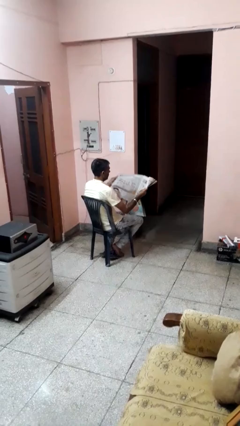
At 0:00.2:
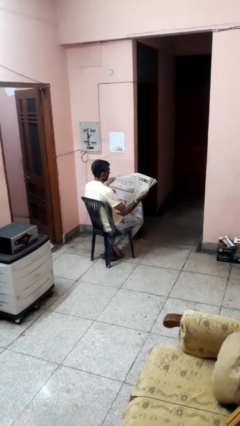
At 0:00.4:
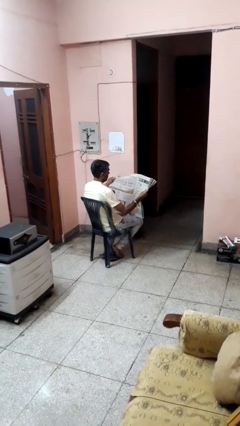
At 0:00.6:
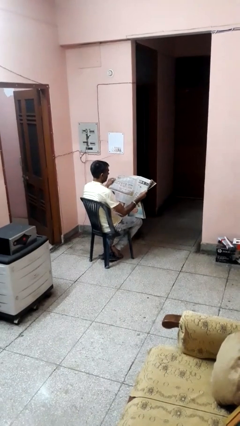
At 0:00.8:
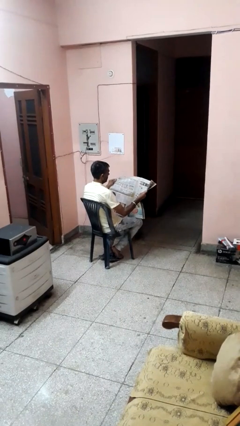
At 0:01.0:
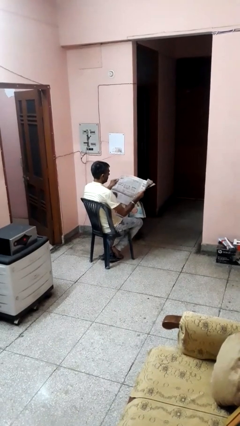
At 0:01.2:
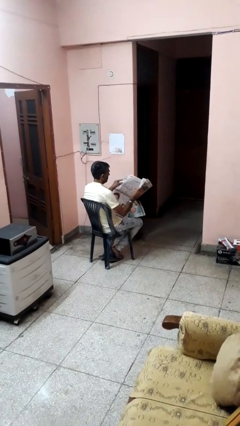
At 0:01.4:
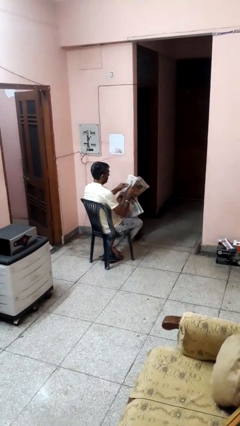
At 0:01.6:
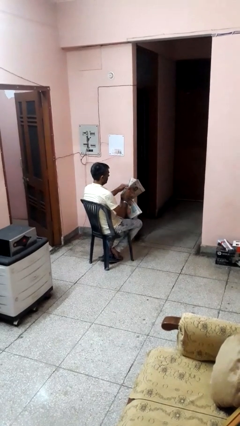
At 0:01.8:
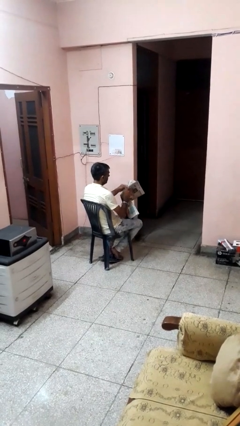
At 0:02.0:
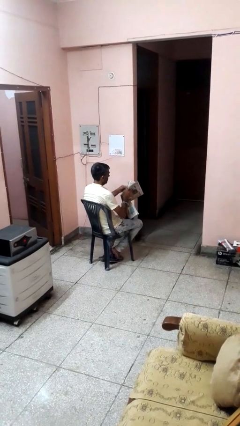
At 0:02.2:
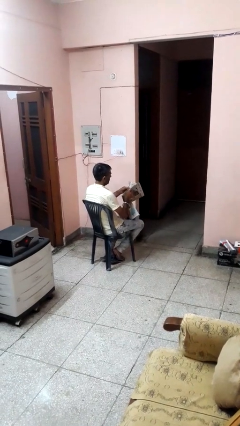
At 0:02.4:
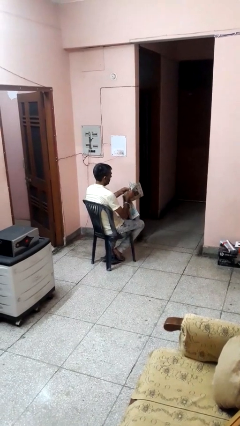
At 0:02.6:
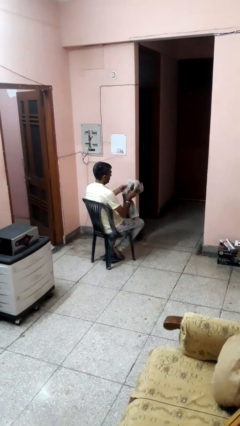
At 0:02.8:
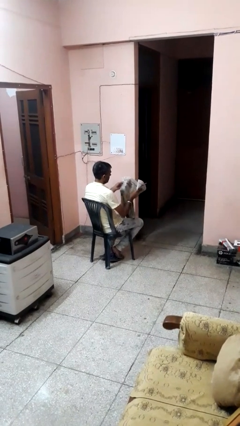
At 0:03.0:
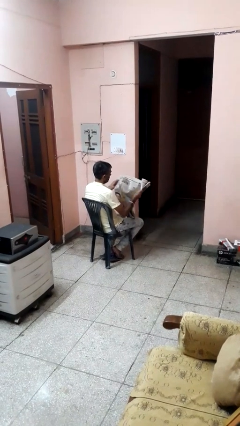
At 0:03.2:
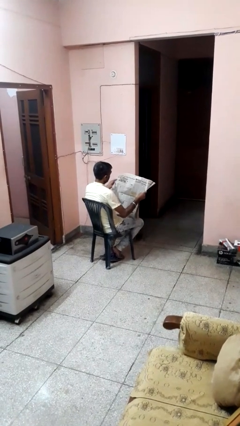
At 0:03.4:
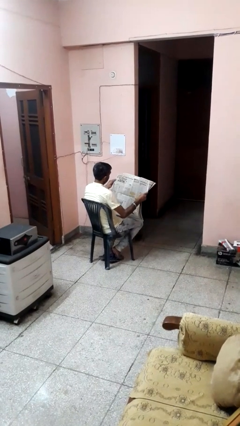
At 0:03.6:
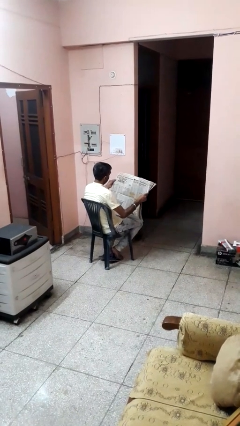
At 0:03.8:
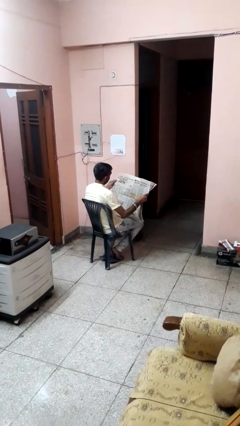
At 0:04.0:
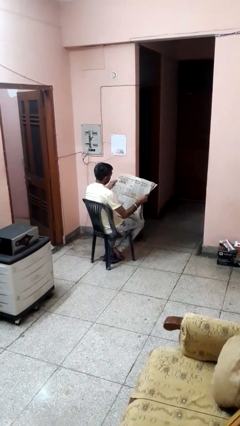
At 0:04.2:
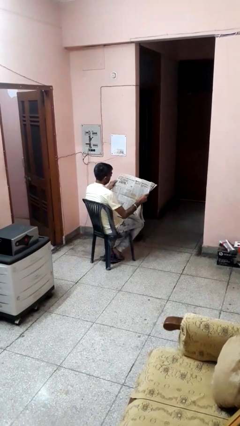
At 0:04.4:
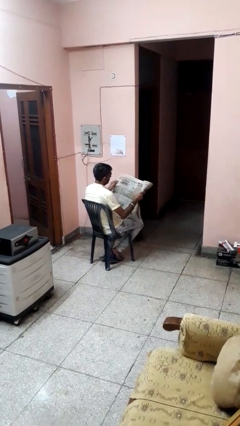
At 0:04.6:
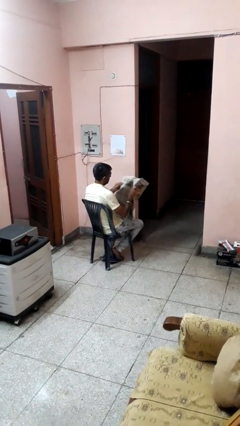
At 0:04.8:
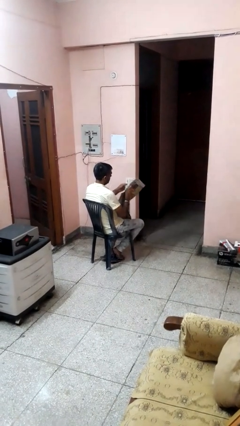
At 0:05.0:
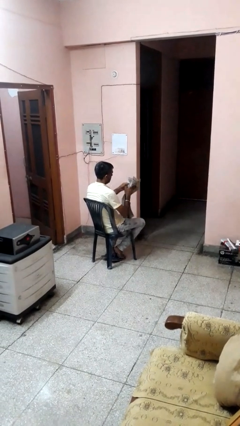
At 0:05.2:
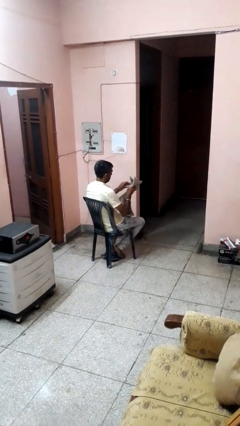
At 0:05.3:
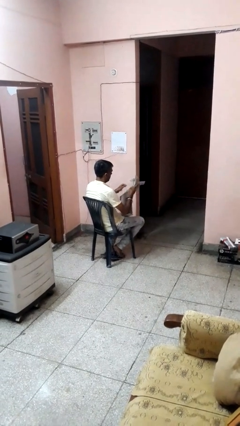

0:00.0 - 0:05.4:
person reads newspaper

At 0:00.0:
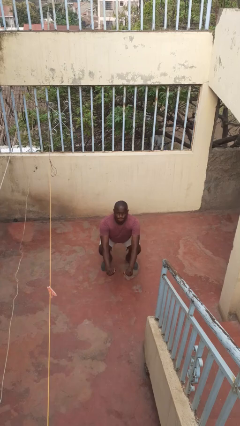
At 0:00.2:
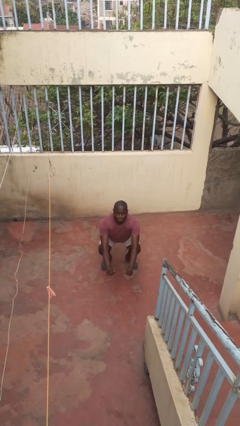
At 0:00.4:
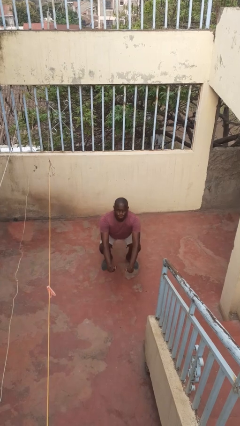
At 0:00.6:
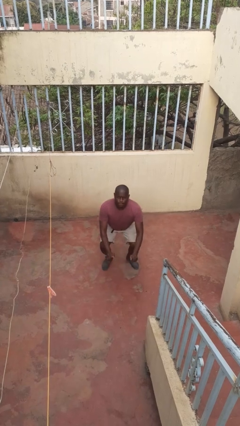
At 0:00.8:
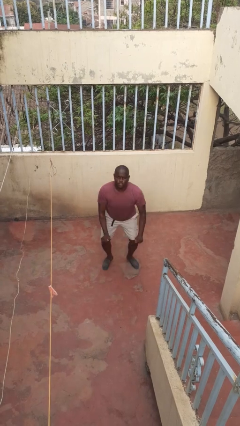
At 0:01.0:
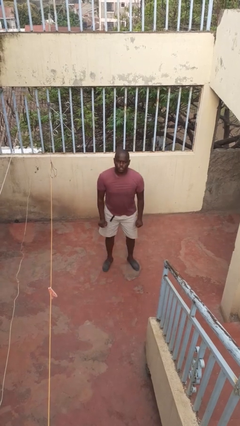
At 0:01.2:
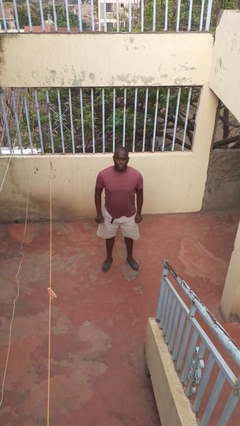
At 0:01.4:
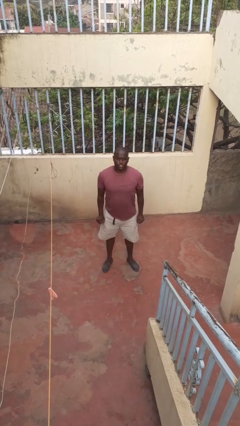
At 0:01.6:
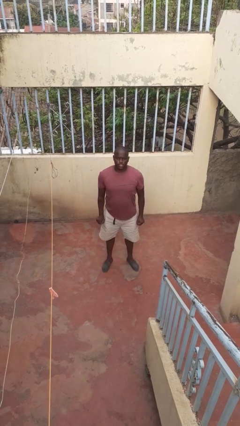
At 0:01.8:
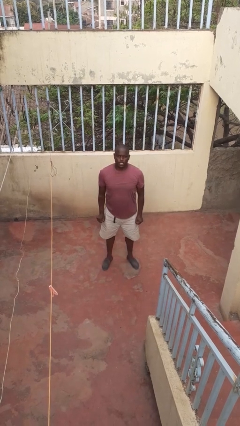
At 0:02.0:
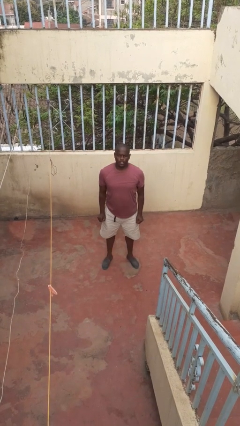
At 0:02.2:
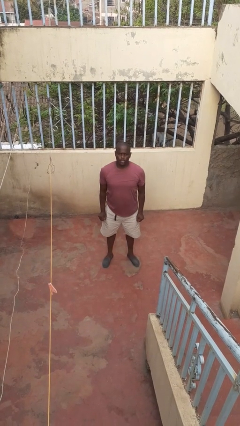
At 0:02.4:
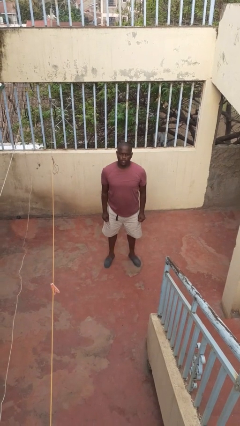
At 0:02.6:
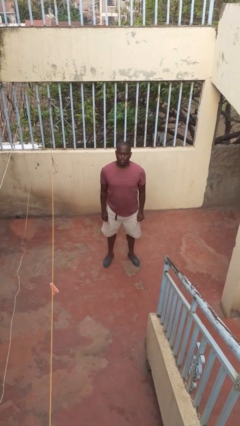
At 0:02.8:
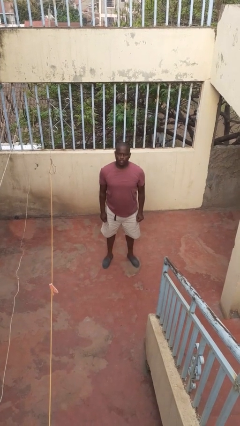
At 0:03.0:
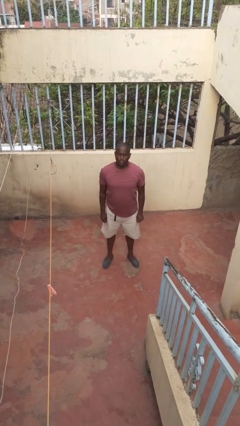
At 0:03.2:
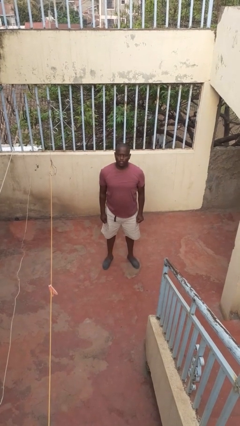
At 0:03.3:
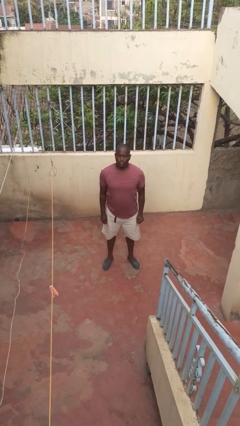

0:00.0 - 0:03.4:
person stands up

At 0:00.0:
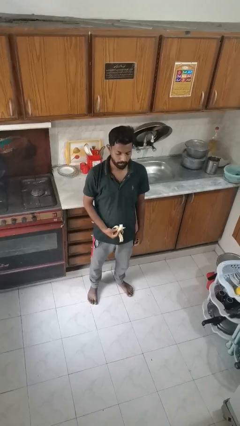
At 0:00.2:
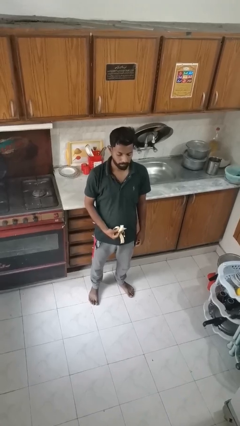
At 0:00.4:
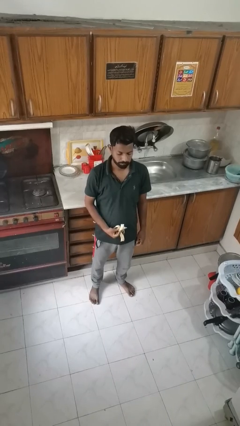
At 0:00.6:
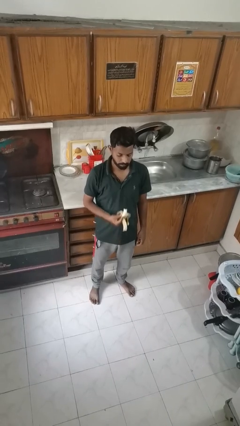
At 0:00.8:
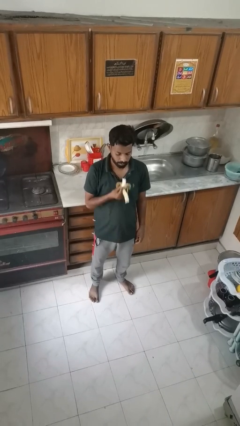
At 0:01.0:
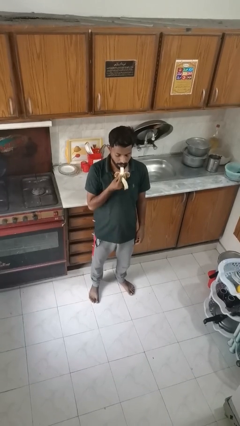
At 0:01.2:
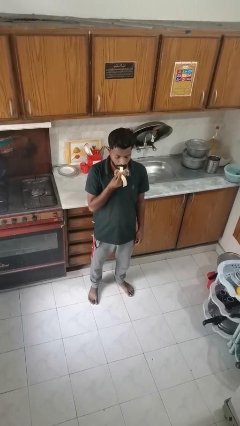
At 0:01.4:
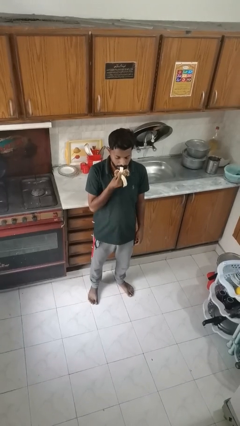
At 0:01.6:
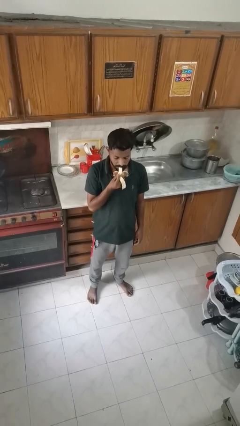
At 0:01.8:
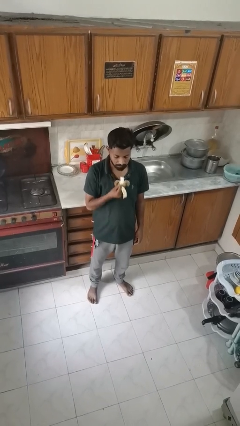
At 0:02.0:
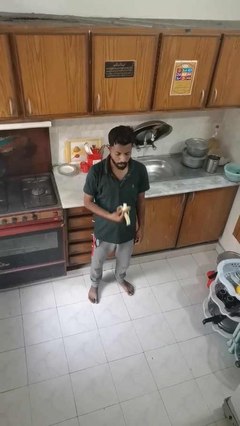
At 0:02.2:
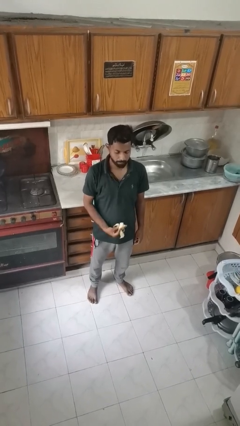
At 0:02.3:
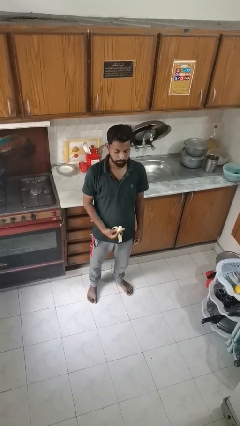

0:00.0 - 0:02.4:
person eats banana

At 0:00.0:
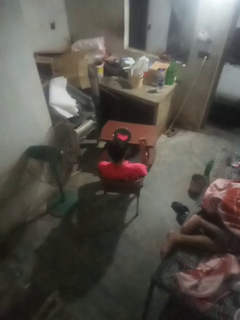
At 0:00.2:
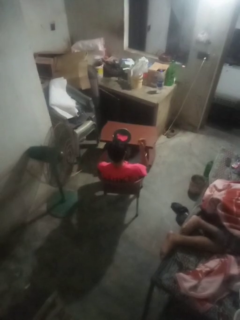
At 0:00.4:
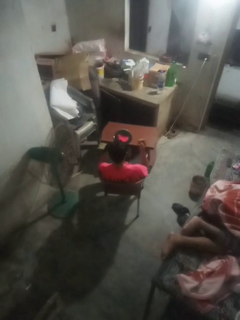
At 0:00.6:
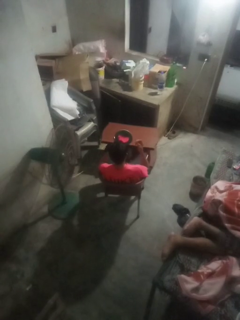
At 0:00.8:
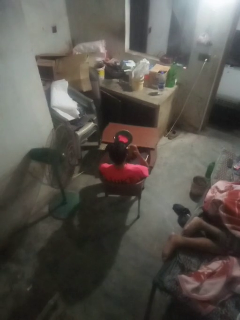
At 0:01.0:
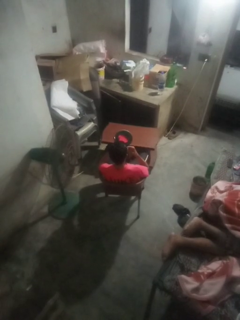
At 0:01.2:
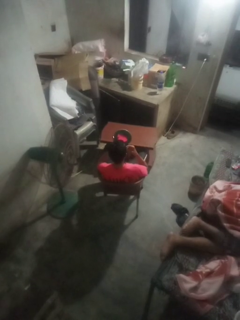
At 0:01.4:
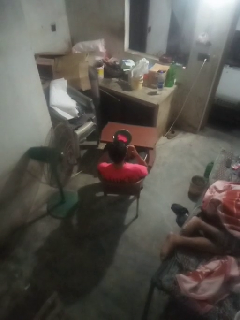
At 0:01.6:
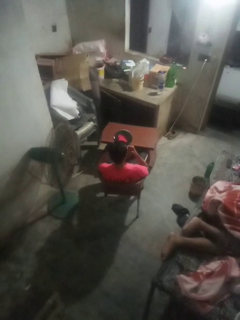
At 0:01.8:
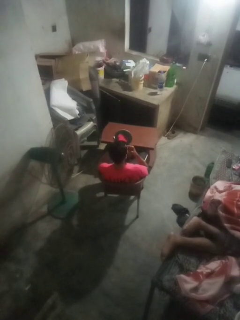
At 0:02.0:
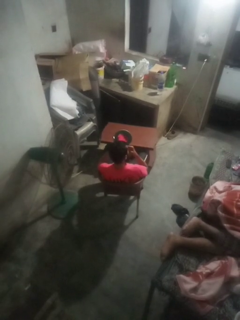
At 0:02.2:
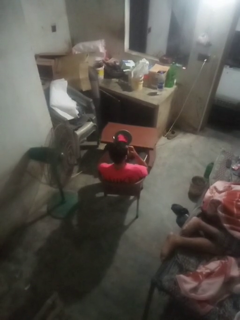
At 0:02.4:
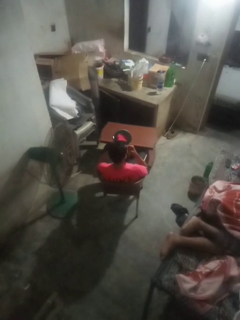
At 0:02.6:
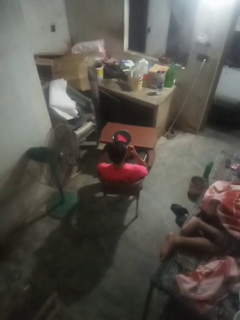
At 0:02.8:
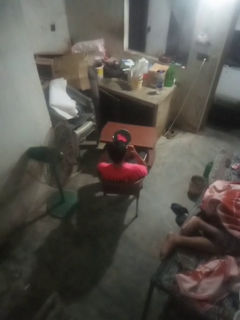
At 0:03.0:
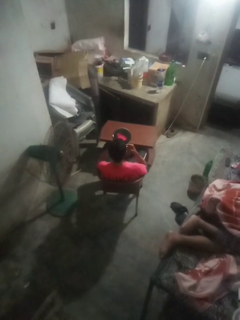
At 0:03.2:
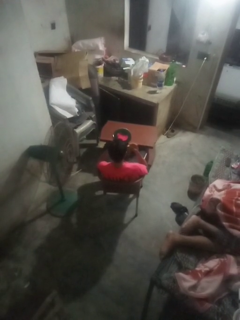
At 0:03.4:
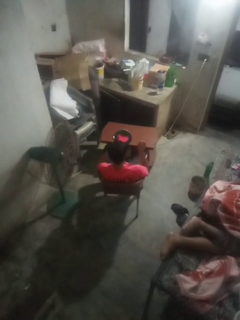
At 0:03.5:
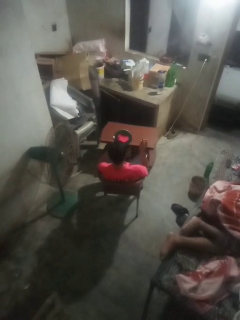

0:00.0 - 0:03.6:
person applies lip makeup

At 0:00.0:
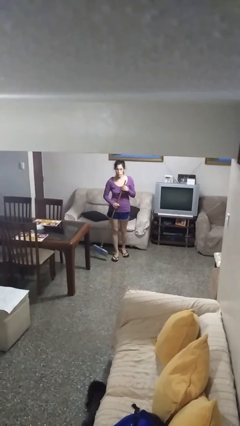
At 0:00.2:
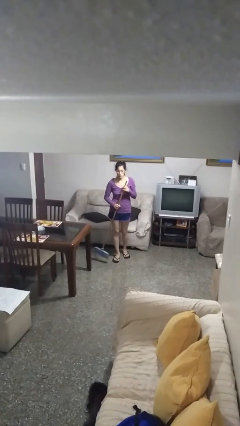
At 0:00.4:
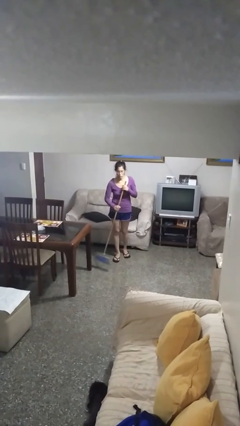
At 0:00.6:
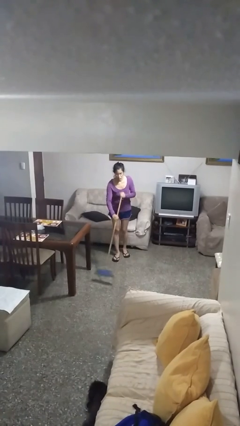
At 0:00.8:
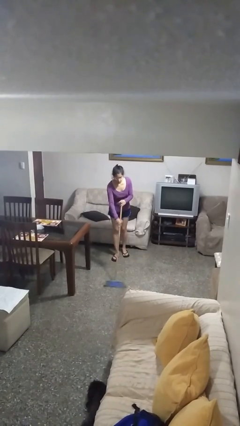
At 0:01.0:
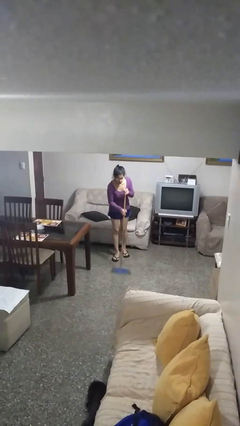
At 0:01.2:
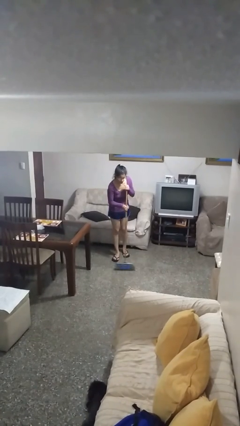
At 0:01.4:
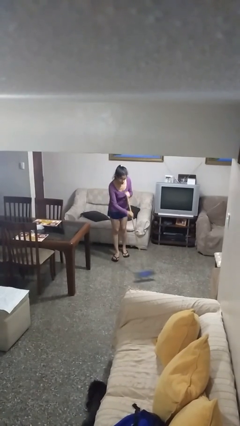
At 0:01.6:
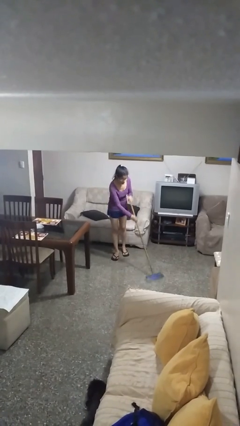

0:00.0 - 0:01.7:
person sweeps floor

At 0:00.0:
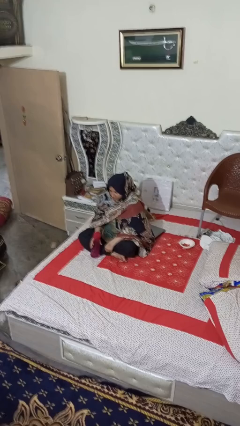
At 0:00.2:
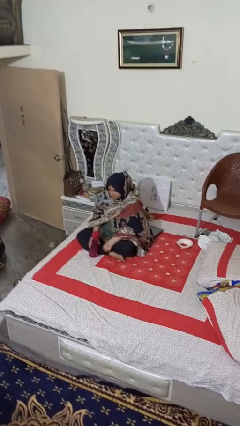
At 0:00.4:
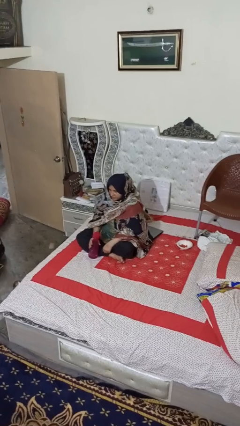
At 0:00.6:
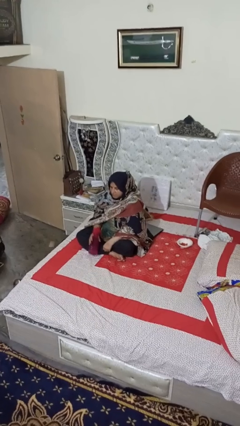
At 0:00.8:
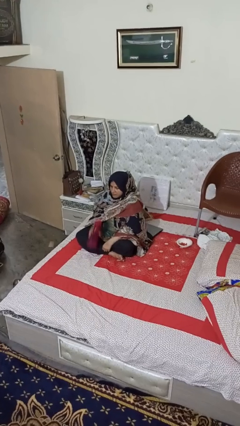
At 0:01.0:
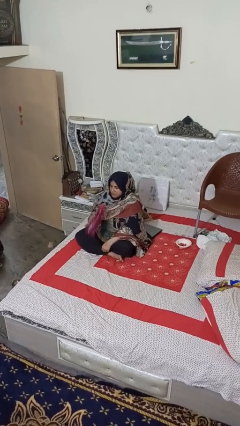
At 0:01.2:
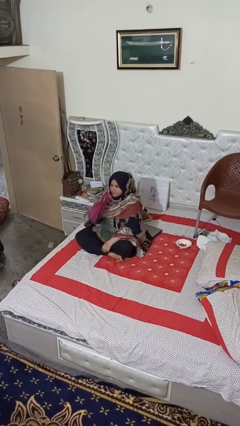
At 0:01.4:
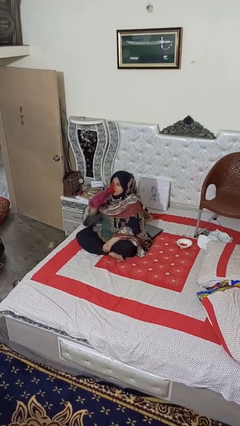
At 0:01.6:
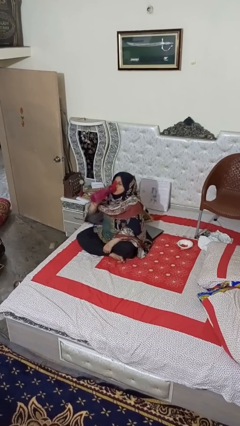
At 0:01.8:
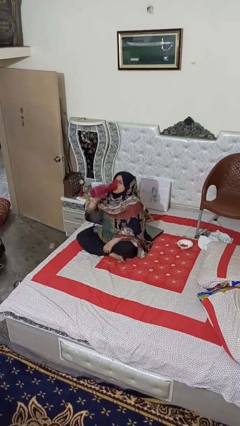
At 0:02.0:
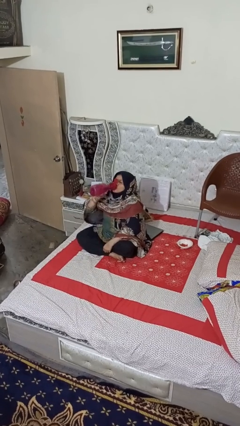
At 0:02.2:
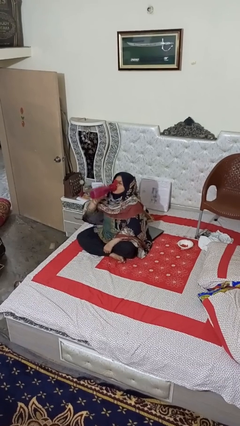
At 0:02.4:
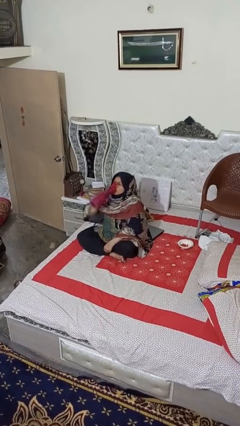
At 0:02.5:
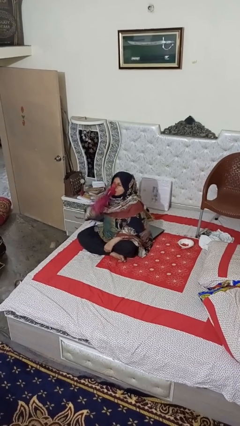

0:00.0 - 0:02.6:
person drinks from bottle
